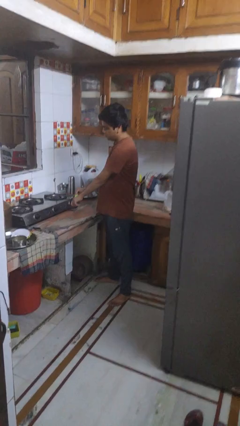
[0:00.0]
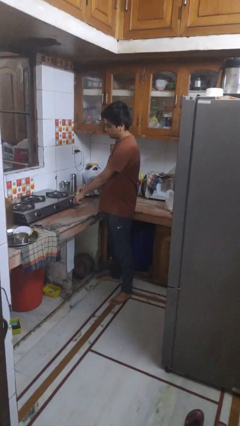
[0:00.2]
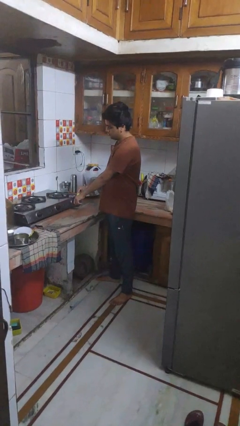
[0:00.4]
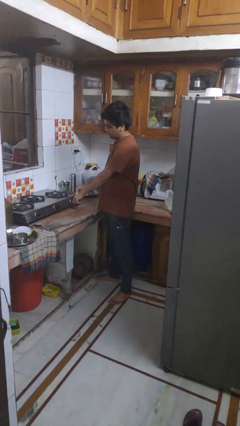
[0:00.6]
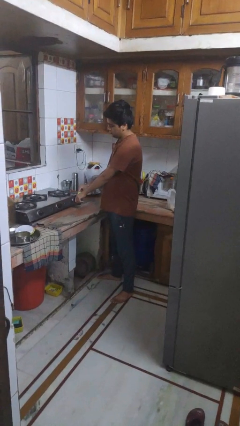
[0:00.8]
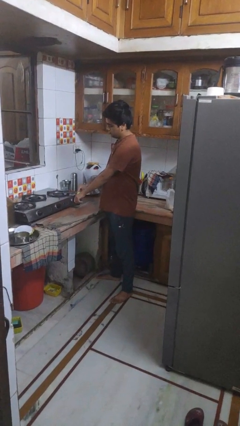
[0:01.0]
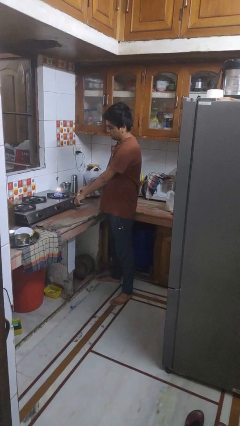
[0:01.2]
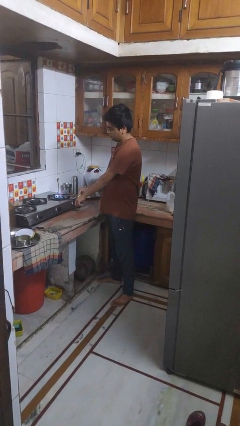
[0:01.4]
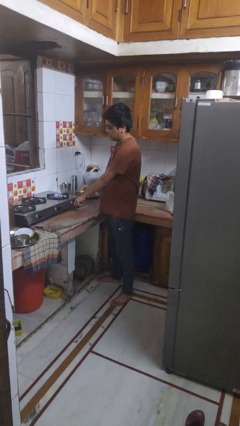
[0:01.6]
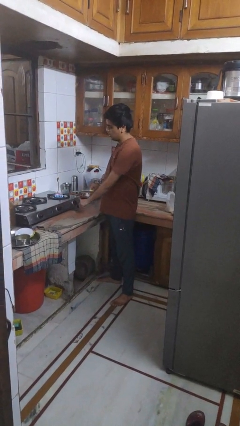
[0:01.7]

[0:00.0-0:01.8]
person turns on stovetop

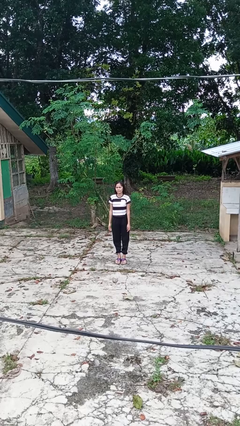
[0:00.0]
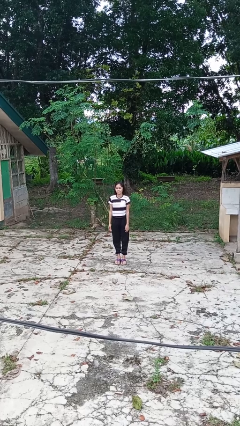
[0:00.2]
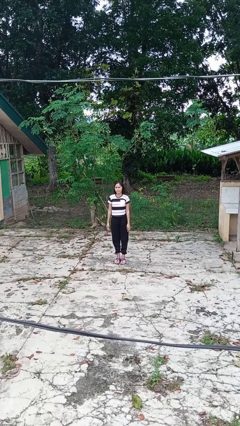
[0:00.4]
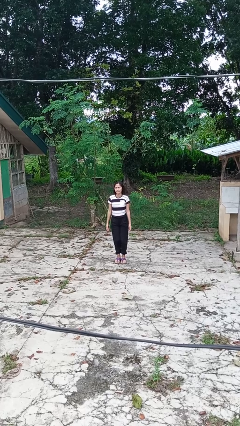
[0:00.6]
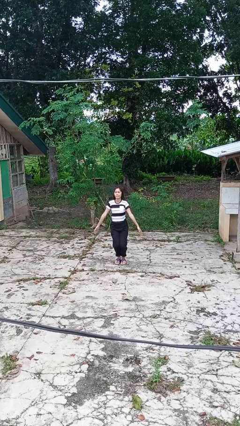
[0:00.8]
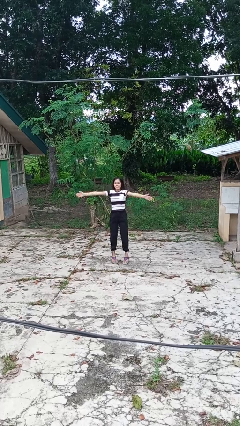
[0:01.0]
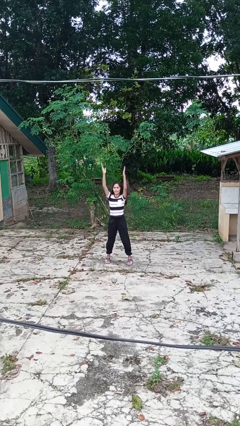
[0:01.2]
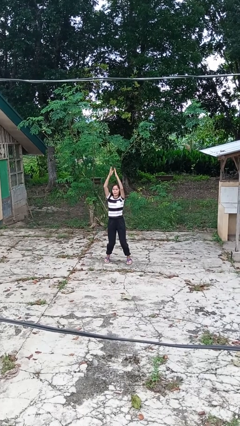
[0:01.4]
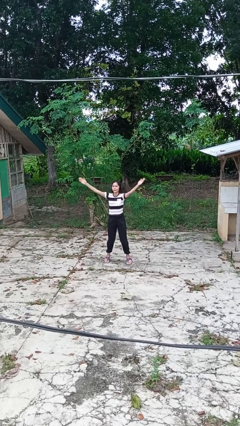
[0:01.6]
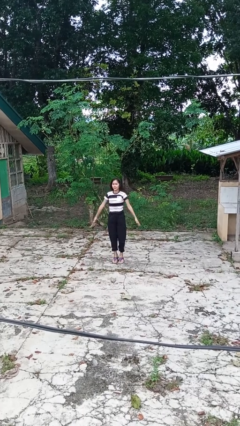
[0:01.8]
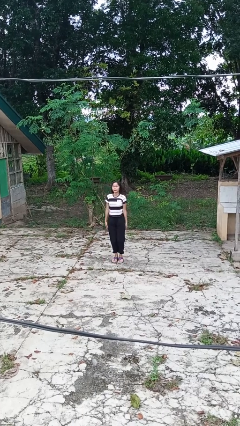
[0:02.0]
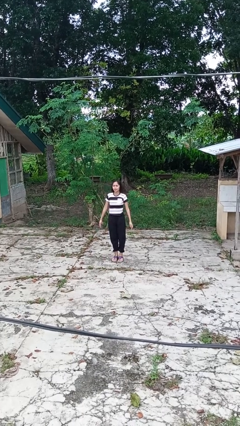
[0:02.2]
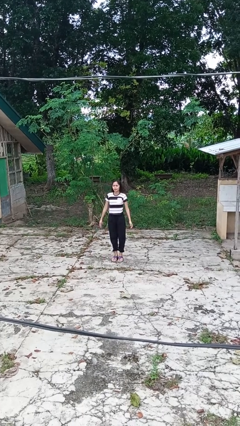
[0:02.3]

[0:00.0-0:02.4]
person exercises with jumping jacks

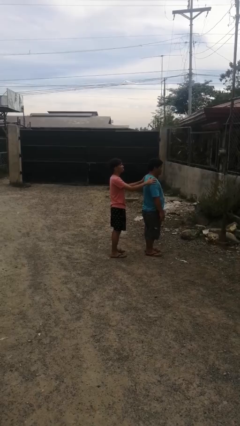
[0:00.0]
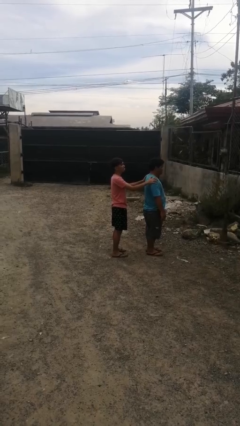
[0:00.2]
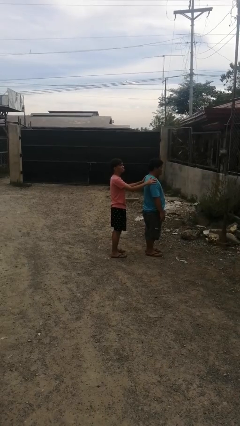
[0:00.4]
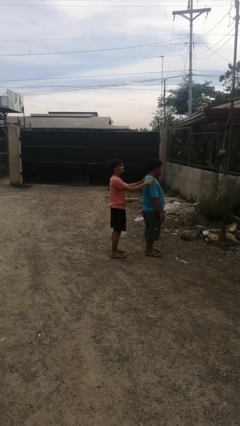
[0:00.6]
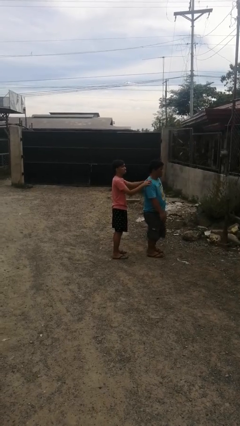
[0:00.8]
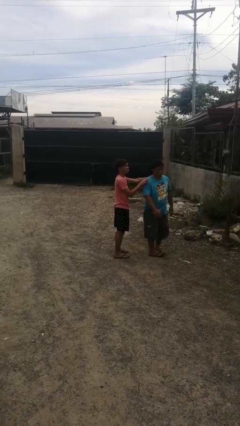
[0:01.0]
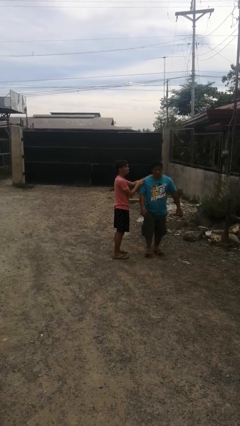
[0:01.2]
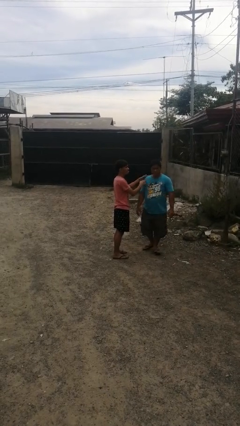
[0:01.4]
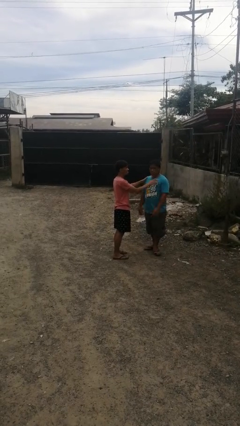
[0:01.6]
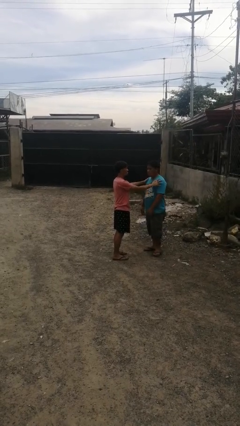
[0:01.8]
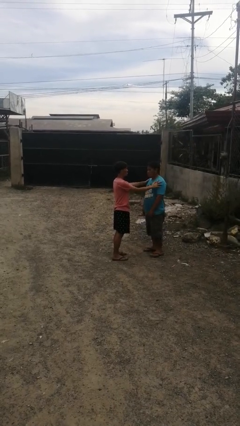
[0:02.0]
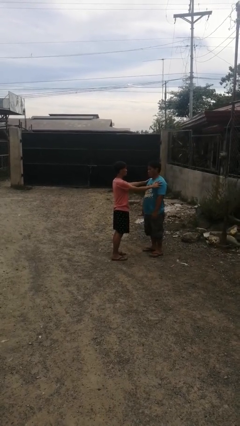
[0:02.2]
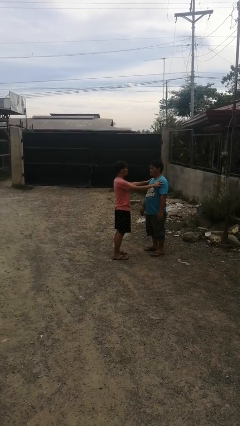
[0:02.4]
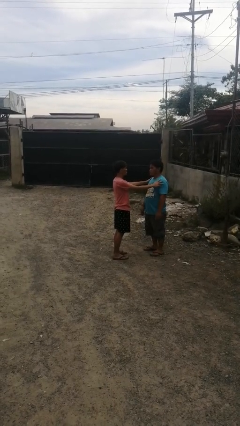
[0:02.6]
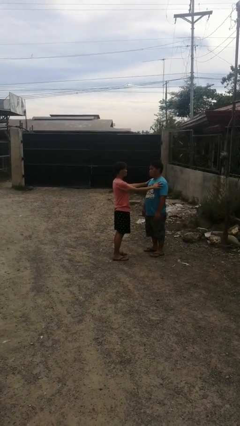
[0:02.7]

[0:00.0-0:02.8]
person spins person around

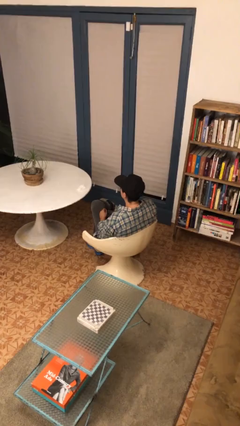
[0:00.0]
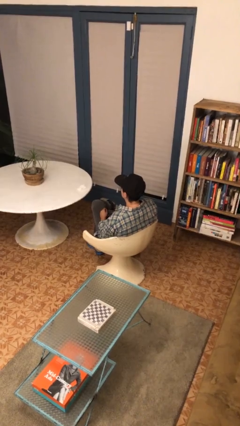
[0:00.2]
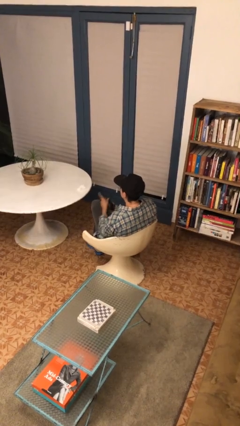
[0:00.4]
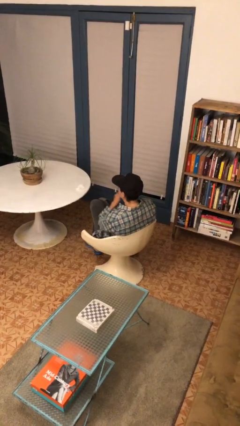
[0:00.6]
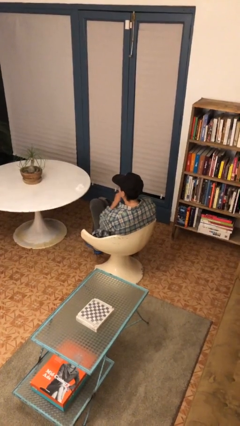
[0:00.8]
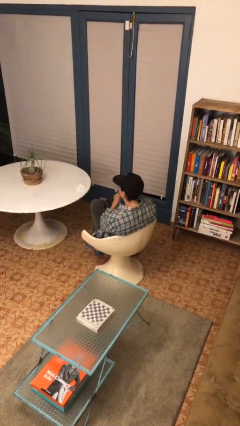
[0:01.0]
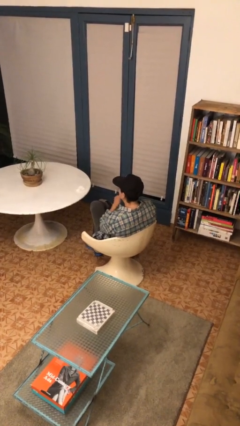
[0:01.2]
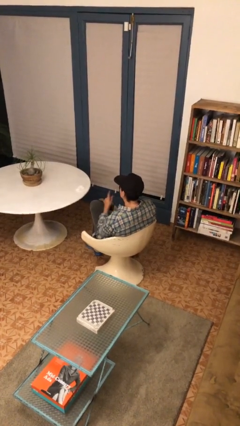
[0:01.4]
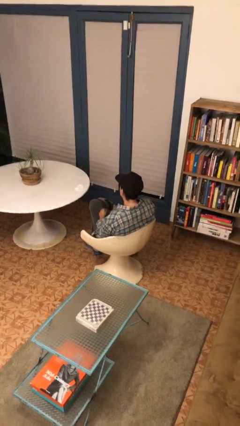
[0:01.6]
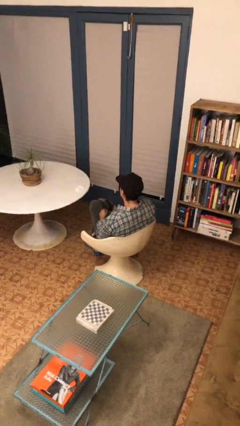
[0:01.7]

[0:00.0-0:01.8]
person gestures be quiet

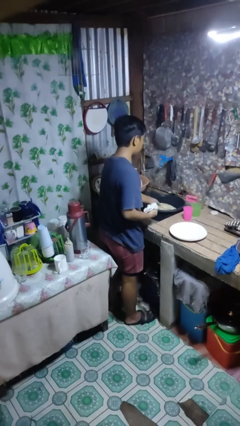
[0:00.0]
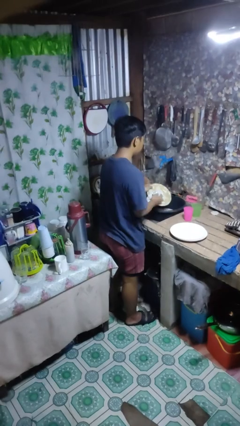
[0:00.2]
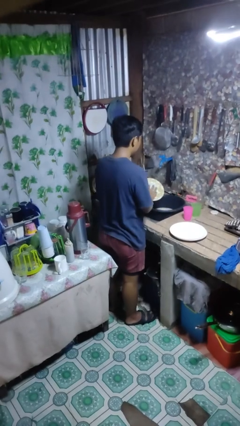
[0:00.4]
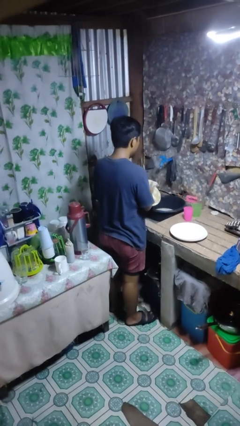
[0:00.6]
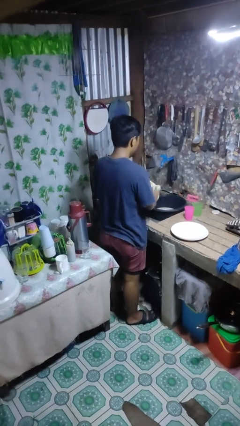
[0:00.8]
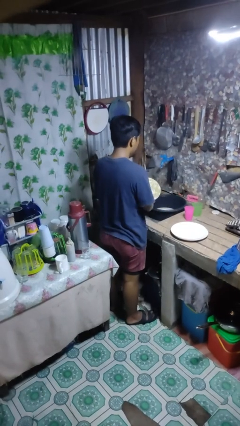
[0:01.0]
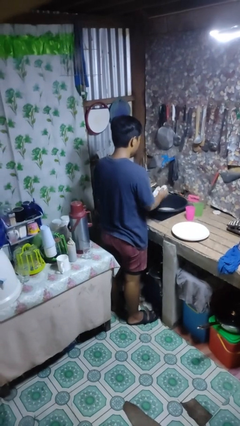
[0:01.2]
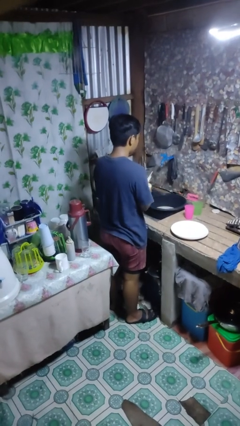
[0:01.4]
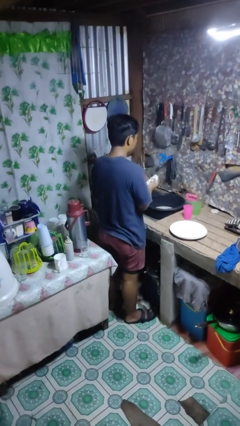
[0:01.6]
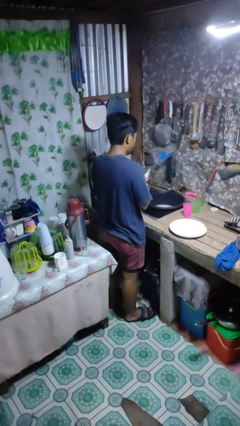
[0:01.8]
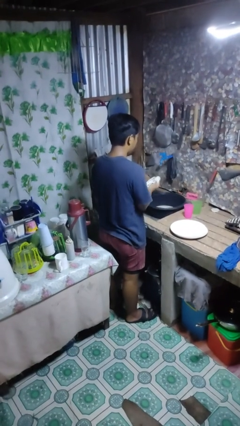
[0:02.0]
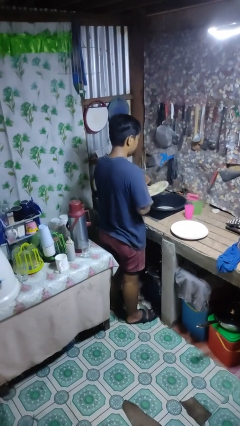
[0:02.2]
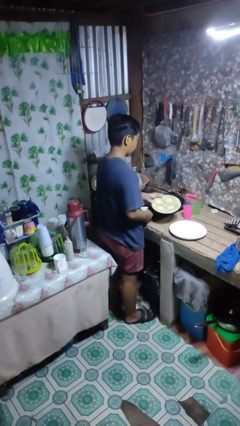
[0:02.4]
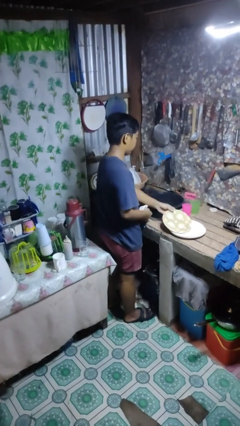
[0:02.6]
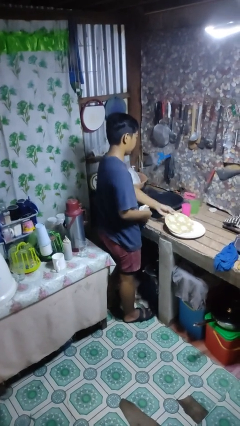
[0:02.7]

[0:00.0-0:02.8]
person dries dish

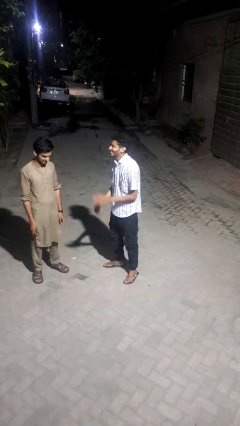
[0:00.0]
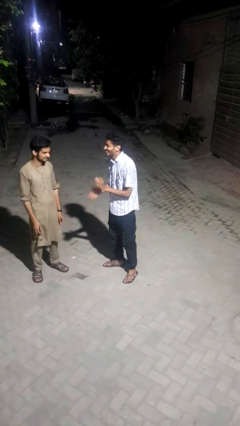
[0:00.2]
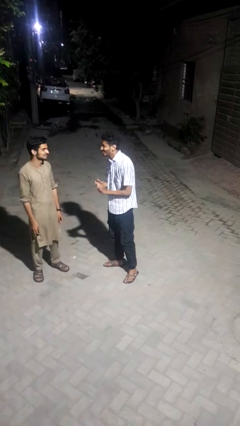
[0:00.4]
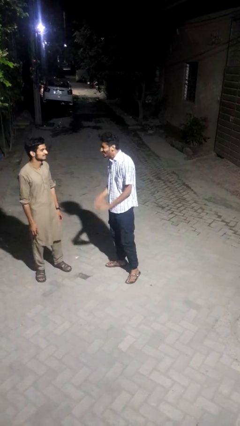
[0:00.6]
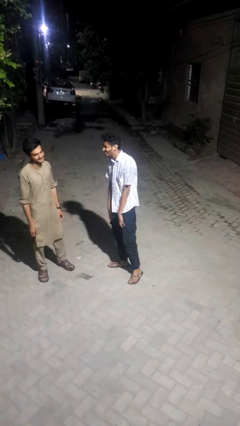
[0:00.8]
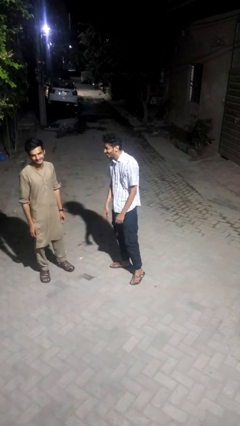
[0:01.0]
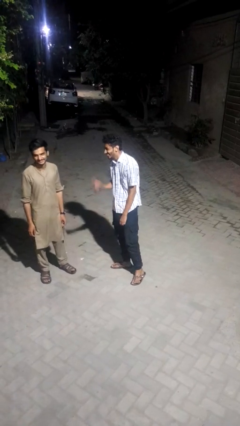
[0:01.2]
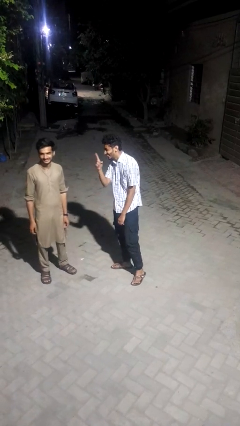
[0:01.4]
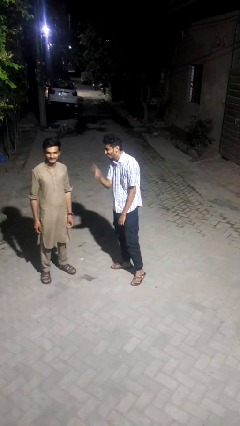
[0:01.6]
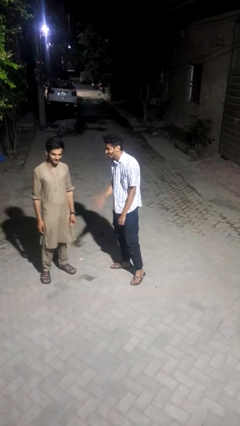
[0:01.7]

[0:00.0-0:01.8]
person laughs with person

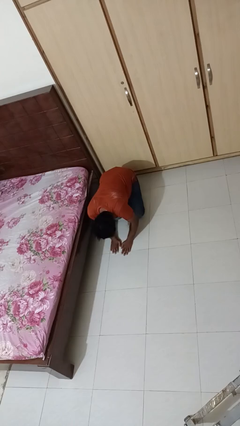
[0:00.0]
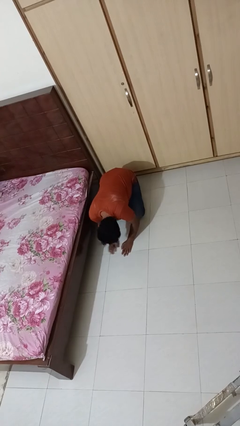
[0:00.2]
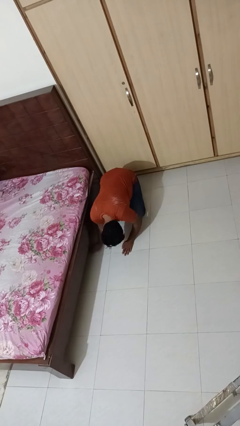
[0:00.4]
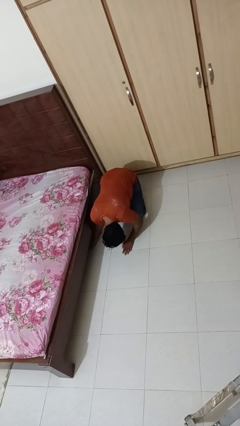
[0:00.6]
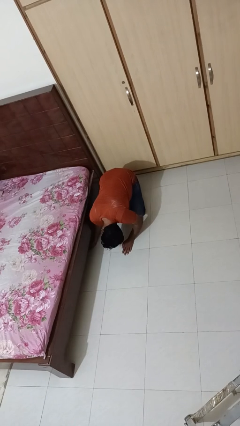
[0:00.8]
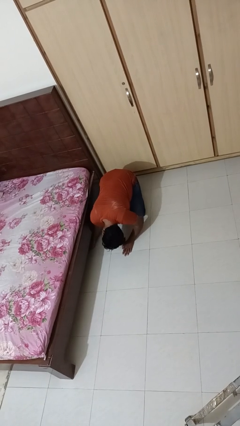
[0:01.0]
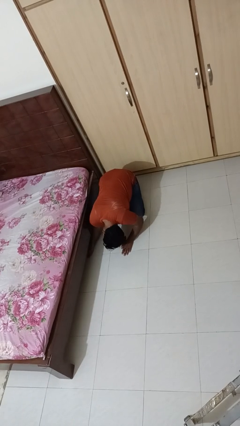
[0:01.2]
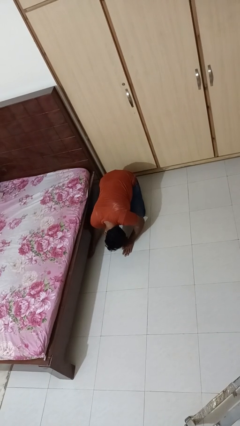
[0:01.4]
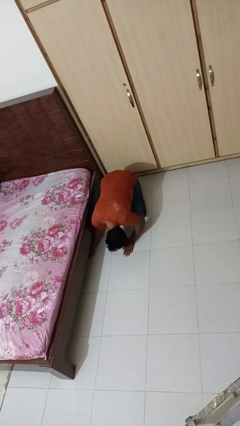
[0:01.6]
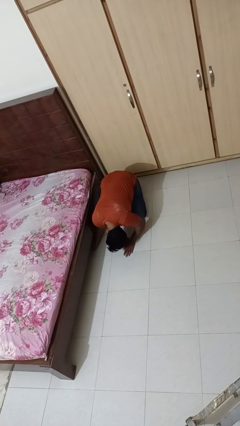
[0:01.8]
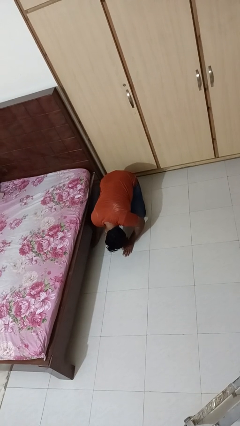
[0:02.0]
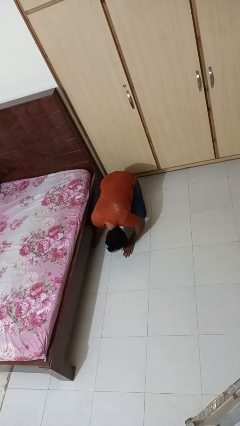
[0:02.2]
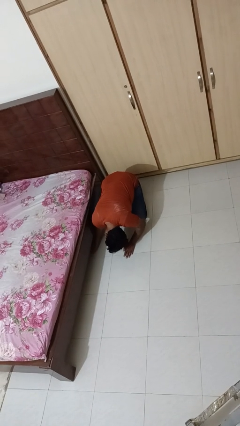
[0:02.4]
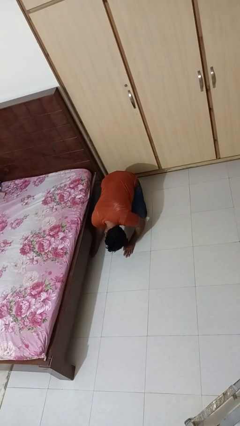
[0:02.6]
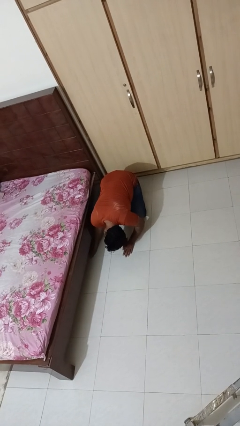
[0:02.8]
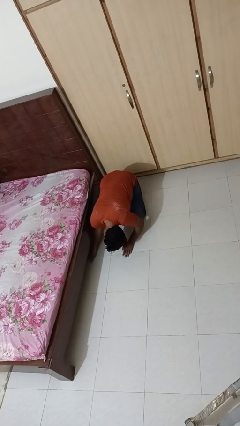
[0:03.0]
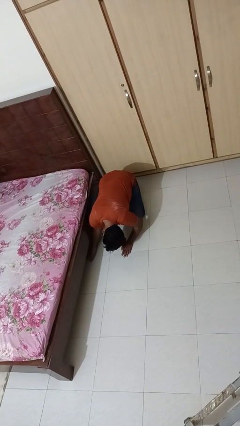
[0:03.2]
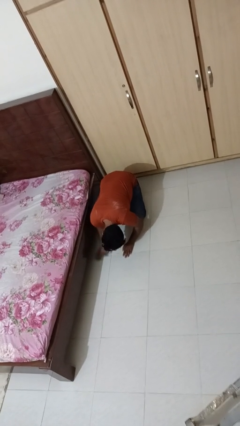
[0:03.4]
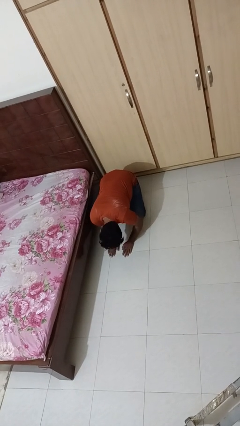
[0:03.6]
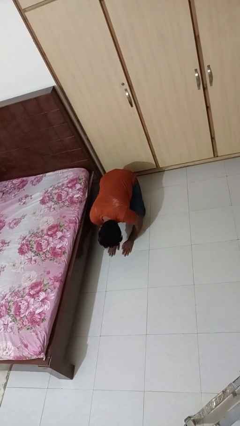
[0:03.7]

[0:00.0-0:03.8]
person searches under bed
